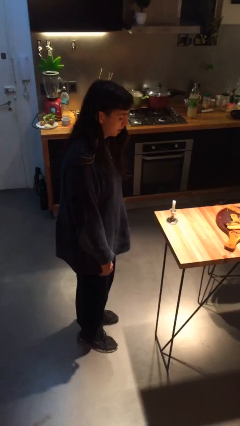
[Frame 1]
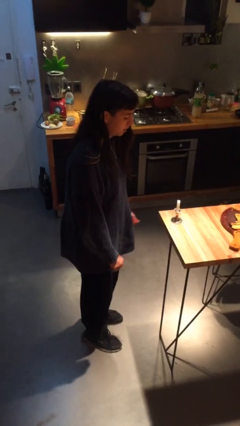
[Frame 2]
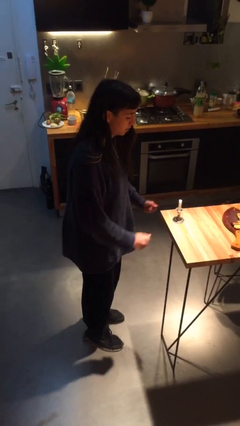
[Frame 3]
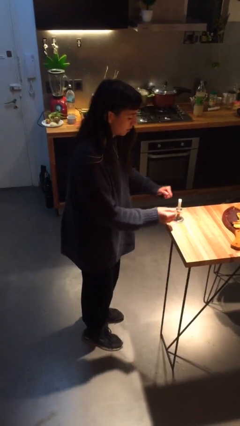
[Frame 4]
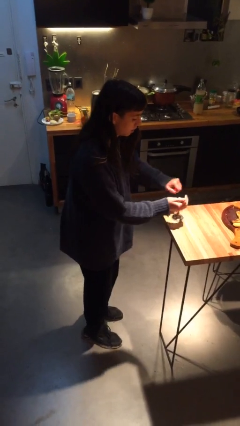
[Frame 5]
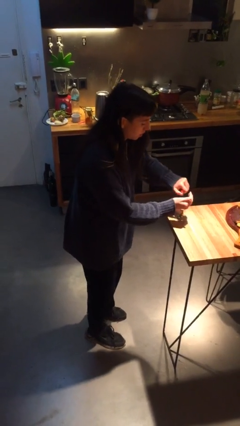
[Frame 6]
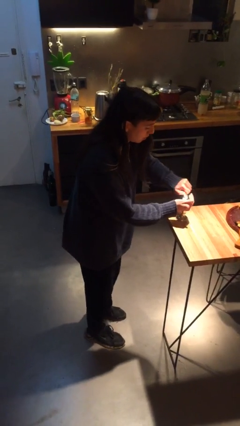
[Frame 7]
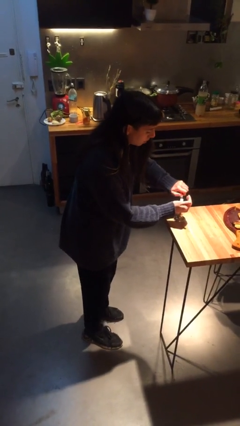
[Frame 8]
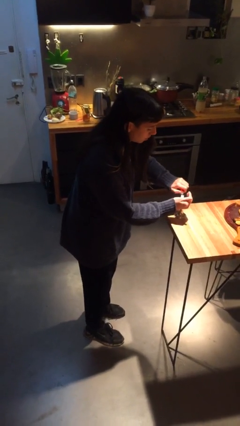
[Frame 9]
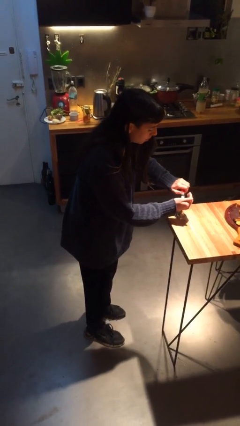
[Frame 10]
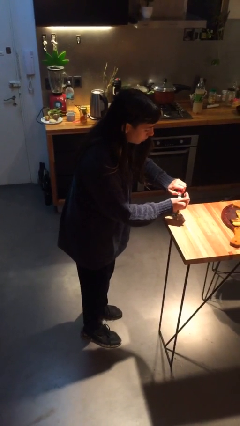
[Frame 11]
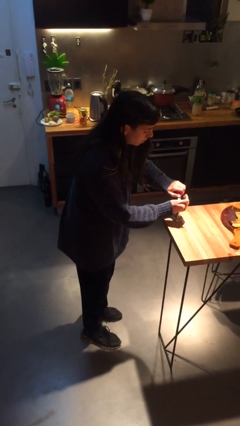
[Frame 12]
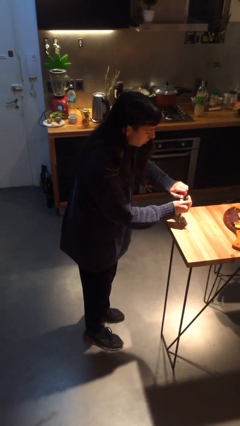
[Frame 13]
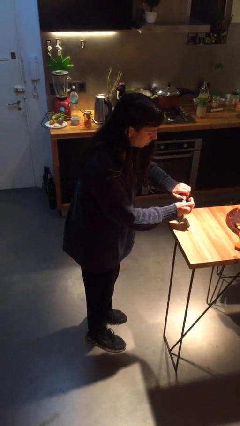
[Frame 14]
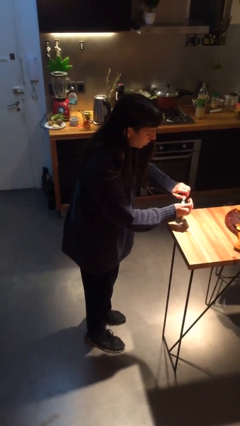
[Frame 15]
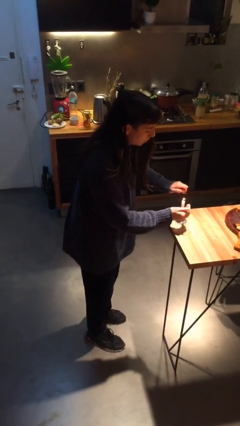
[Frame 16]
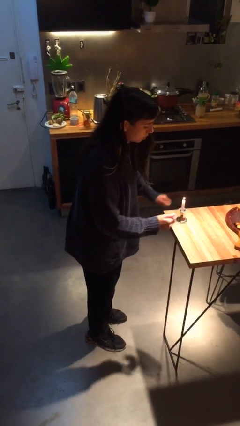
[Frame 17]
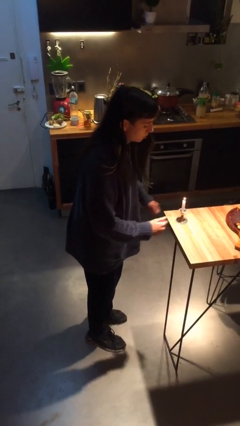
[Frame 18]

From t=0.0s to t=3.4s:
person lights candle

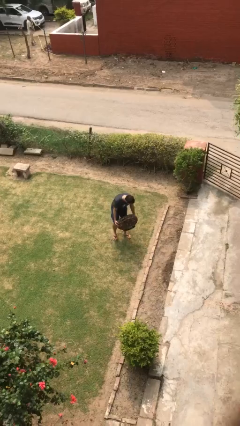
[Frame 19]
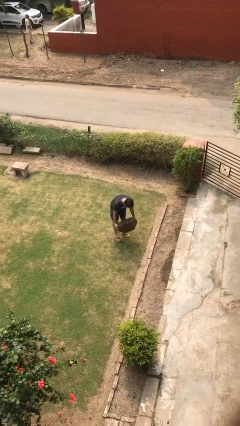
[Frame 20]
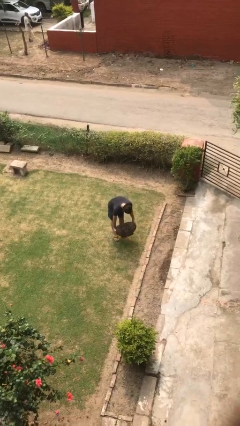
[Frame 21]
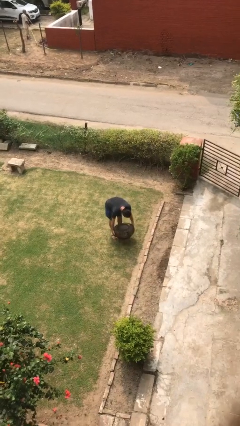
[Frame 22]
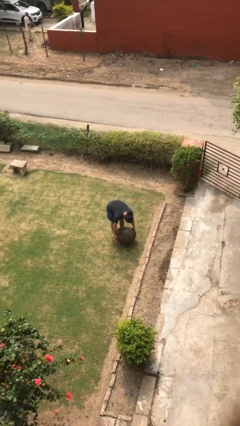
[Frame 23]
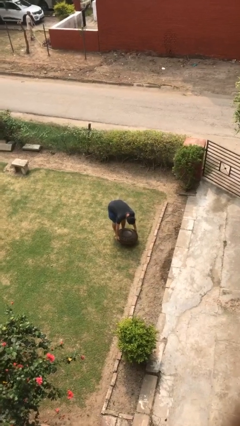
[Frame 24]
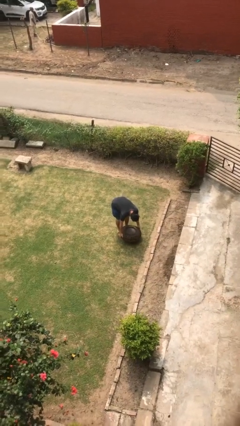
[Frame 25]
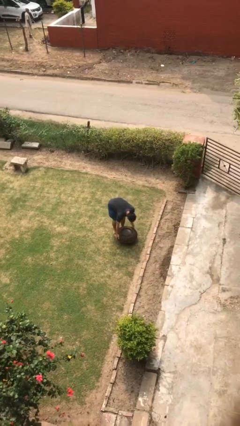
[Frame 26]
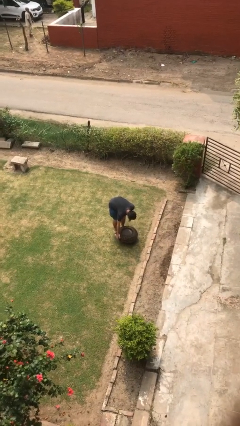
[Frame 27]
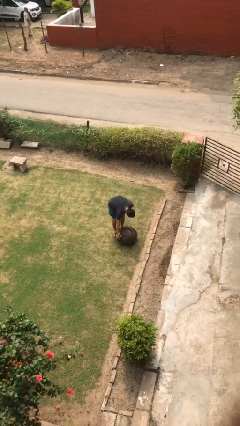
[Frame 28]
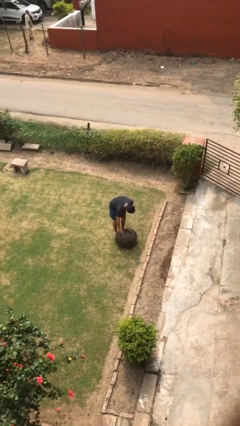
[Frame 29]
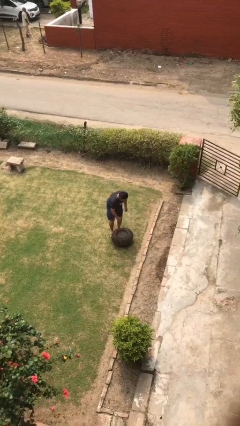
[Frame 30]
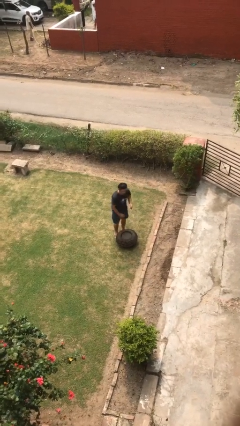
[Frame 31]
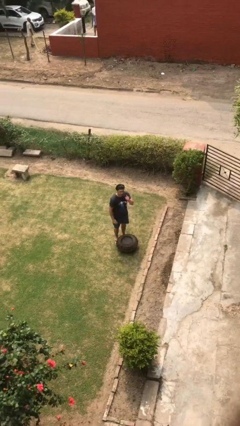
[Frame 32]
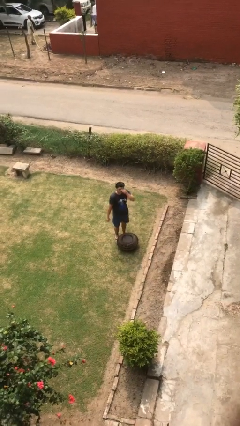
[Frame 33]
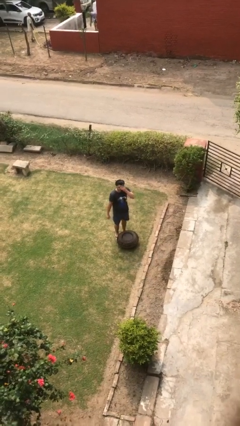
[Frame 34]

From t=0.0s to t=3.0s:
person puts down object on floor

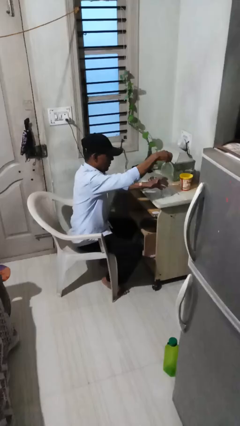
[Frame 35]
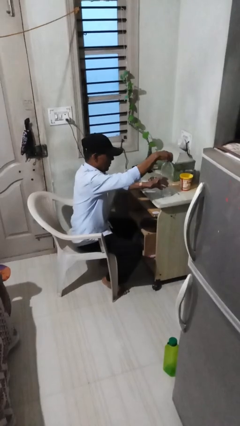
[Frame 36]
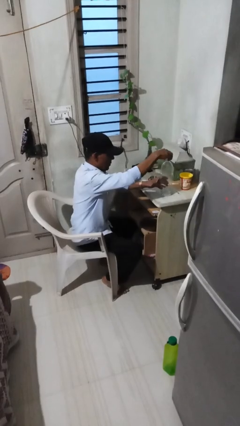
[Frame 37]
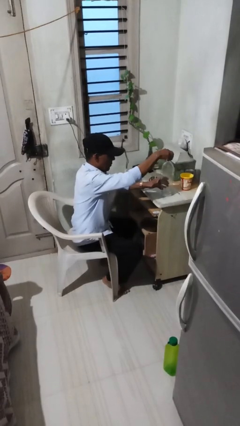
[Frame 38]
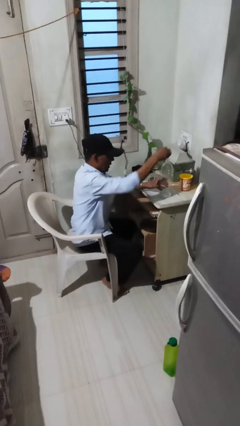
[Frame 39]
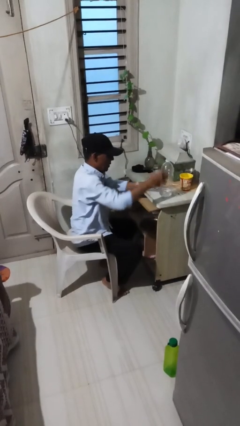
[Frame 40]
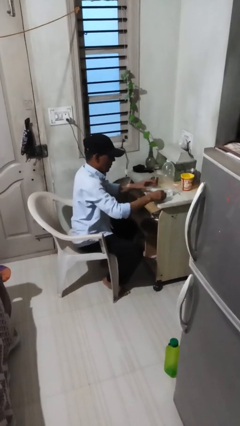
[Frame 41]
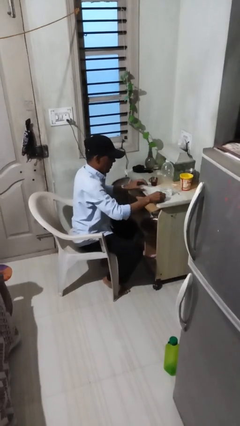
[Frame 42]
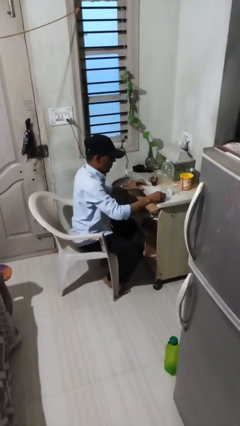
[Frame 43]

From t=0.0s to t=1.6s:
person unscrews lid from bottle

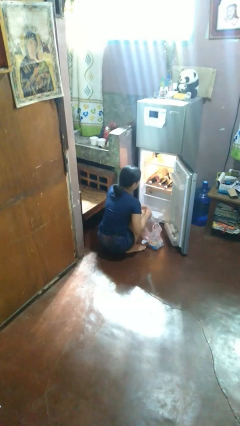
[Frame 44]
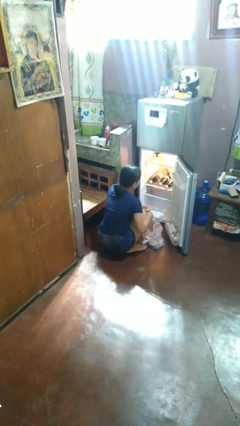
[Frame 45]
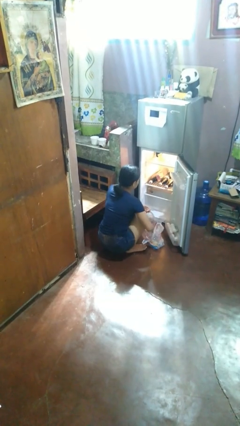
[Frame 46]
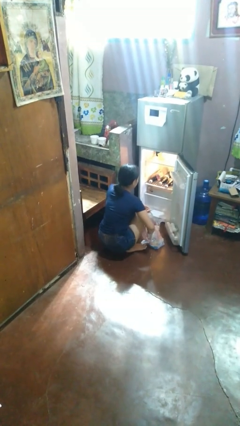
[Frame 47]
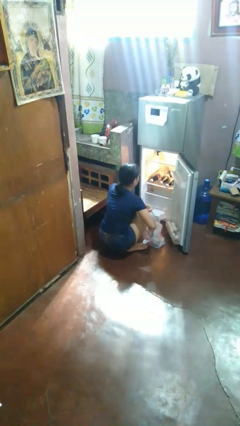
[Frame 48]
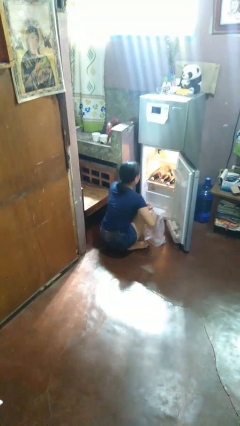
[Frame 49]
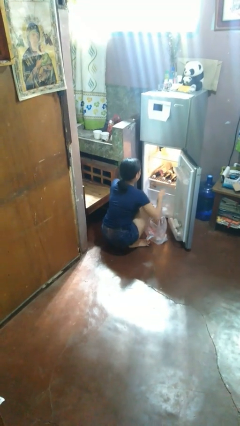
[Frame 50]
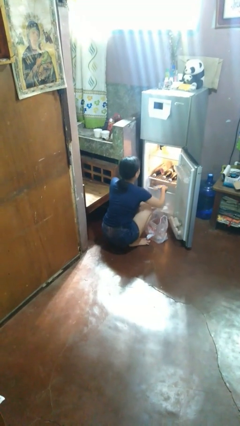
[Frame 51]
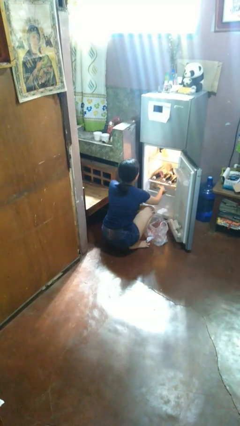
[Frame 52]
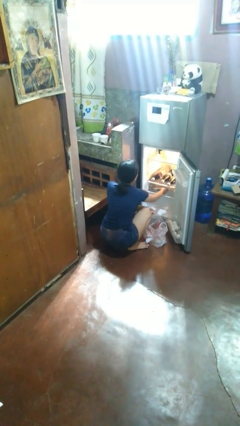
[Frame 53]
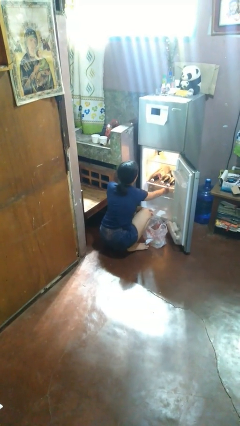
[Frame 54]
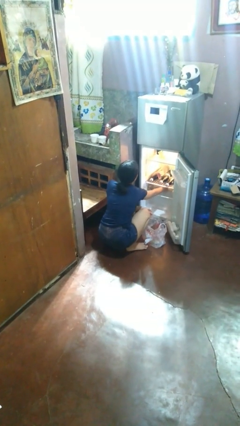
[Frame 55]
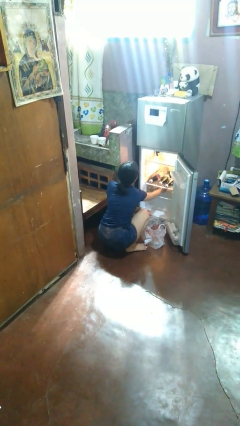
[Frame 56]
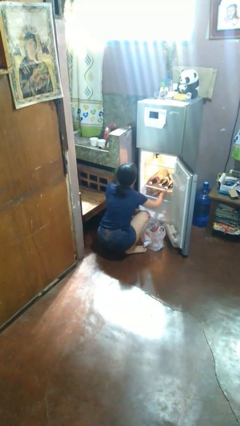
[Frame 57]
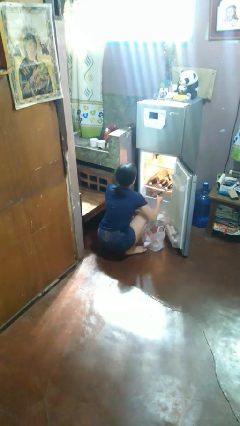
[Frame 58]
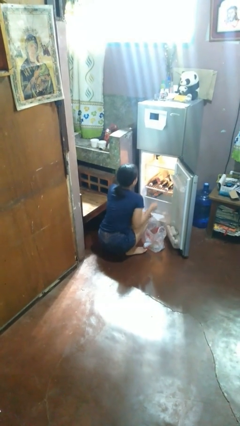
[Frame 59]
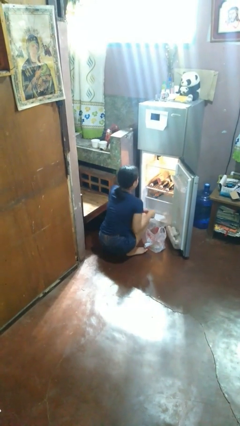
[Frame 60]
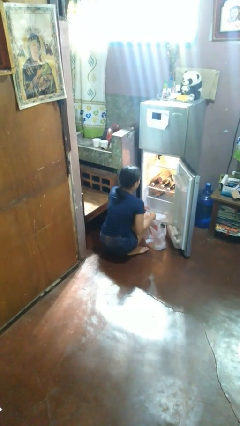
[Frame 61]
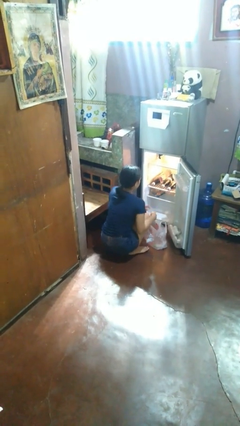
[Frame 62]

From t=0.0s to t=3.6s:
person loads groceries into refrigerator

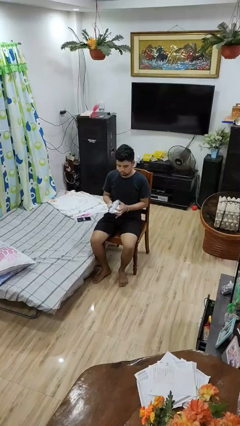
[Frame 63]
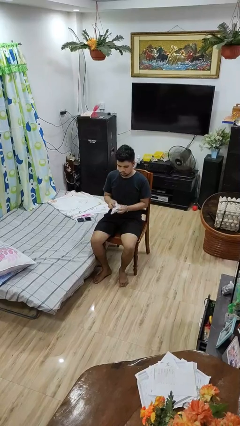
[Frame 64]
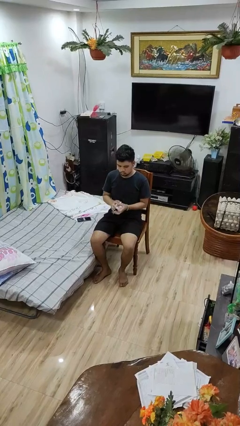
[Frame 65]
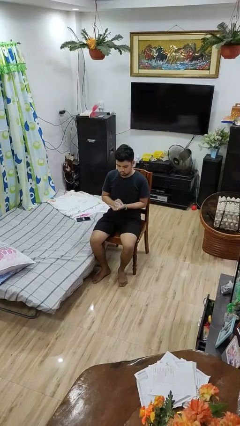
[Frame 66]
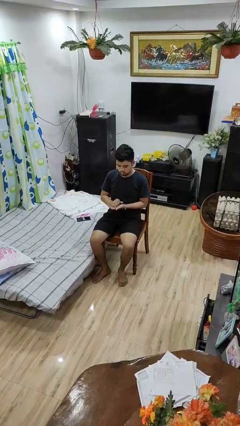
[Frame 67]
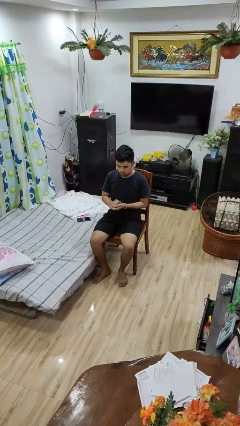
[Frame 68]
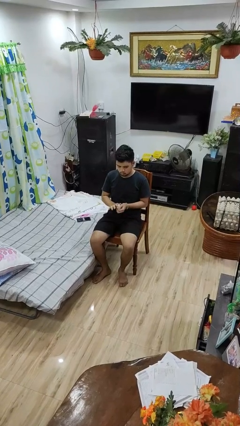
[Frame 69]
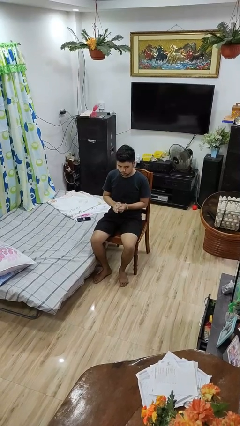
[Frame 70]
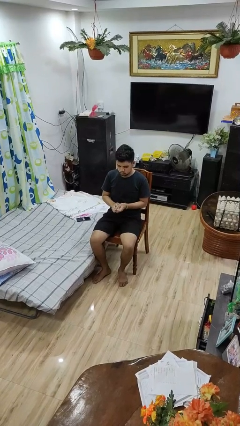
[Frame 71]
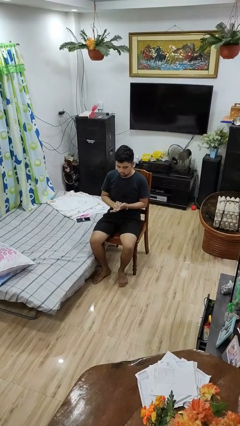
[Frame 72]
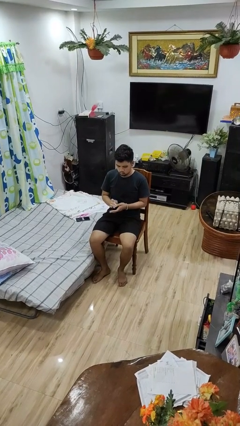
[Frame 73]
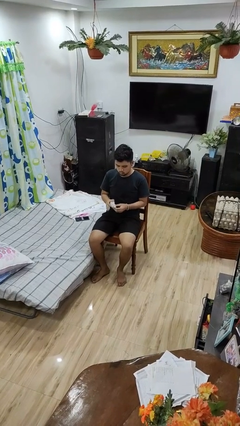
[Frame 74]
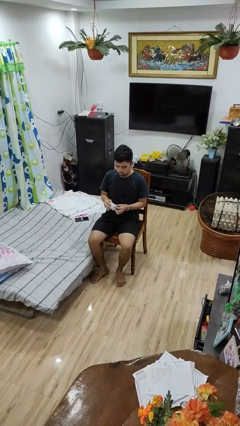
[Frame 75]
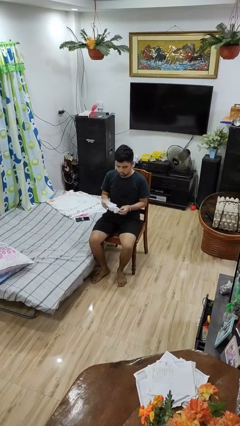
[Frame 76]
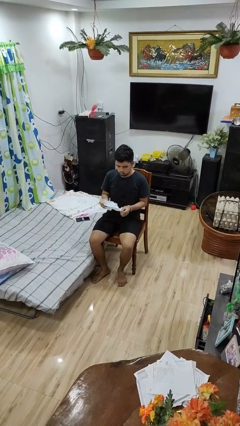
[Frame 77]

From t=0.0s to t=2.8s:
person crumples paper

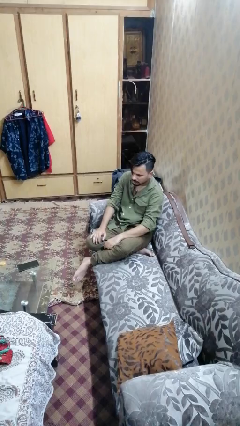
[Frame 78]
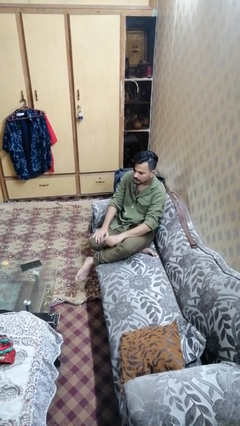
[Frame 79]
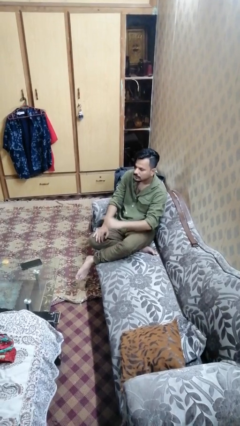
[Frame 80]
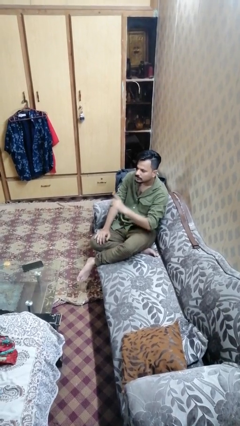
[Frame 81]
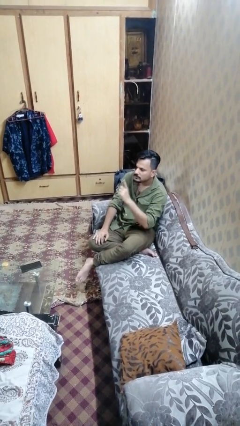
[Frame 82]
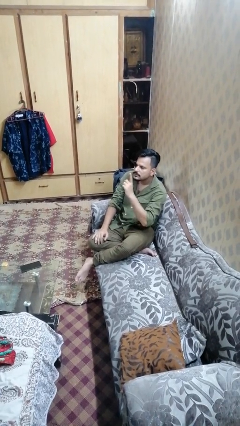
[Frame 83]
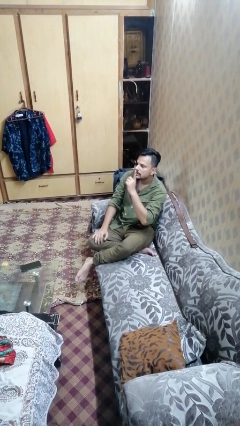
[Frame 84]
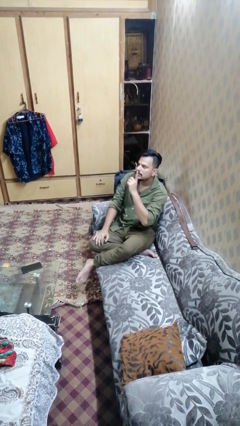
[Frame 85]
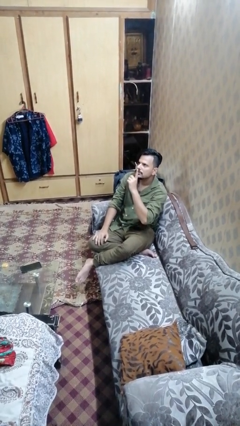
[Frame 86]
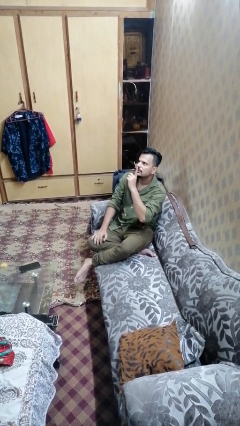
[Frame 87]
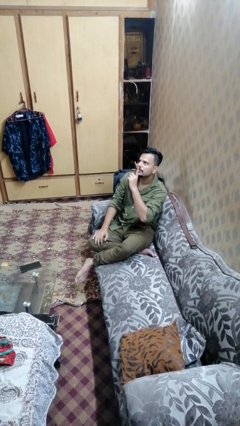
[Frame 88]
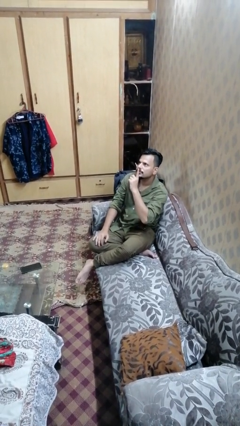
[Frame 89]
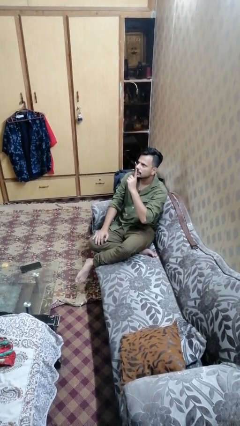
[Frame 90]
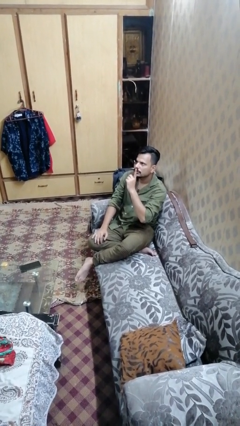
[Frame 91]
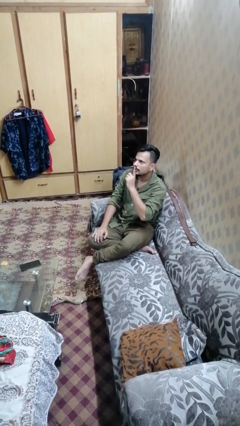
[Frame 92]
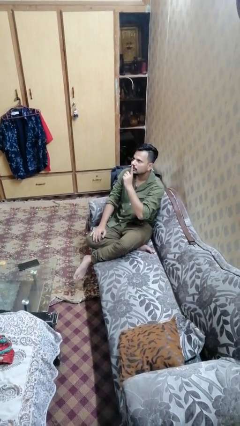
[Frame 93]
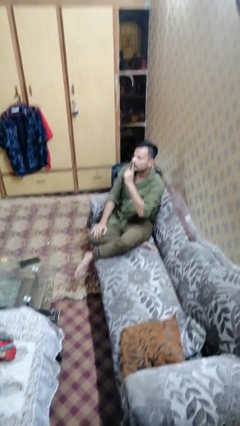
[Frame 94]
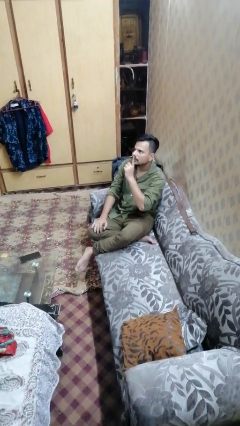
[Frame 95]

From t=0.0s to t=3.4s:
person gestures be quiet
